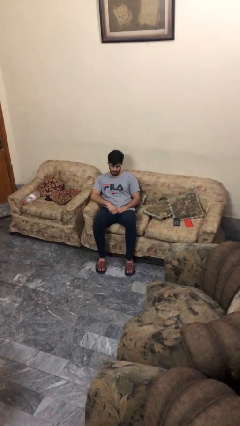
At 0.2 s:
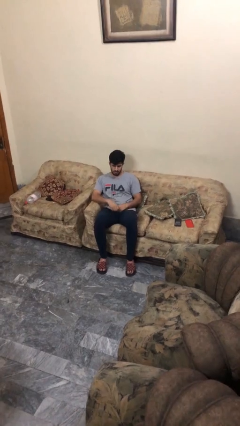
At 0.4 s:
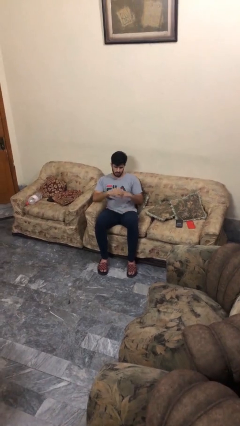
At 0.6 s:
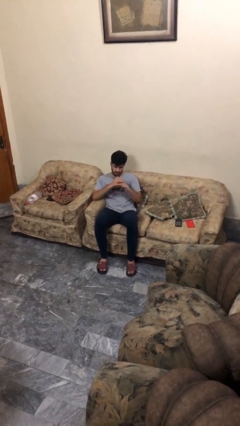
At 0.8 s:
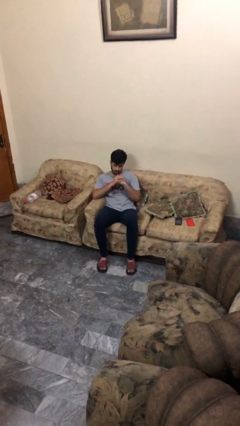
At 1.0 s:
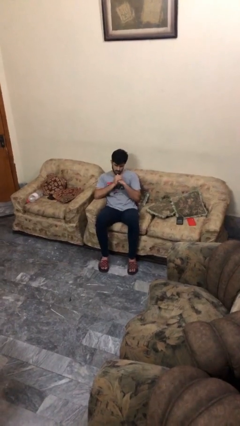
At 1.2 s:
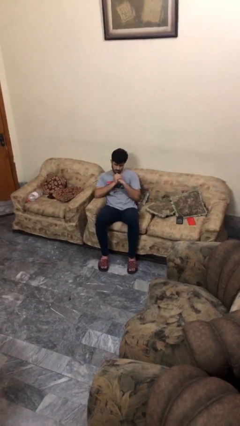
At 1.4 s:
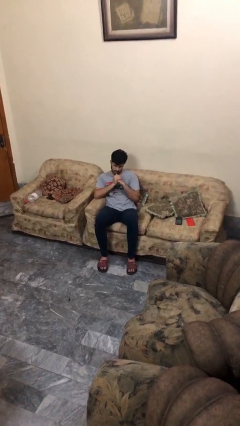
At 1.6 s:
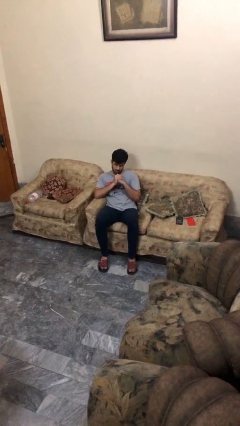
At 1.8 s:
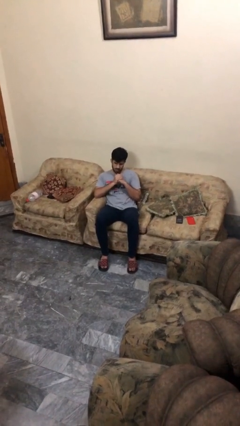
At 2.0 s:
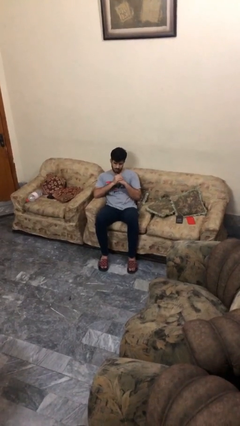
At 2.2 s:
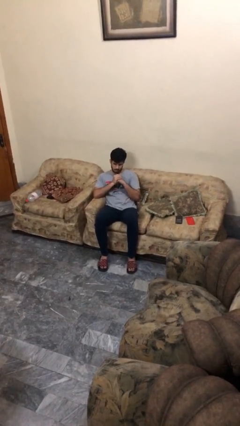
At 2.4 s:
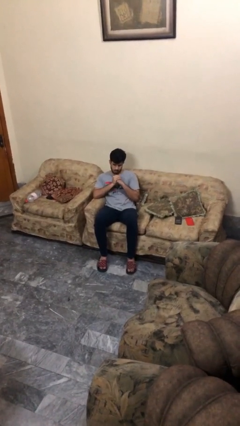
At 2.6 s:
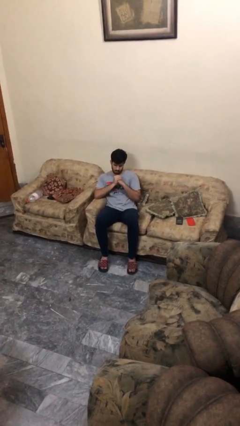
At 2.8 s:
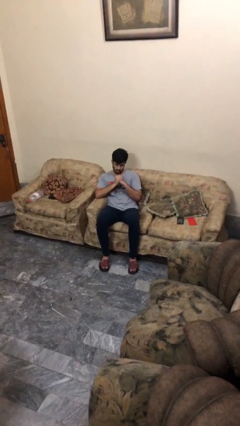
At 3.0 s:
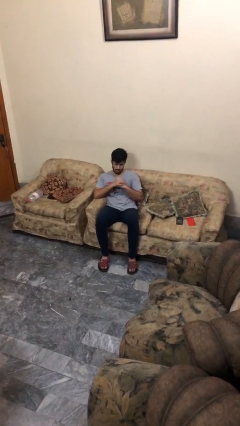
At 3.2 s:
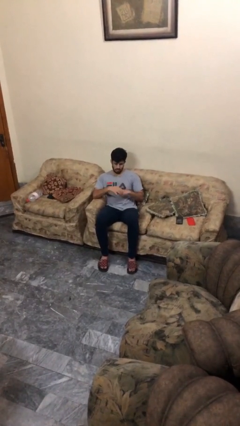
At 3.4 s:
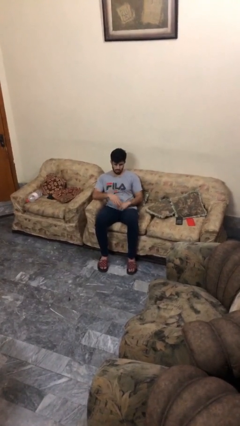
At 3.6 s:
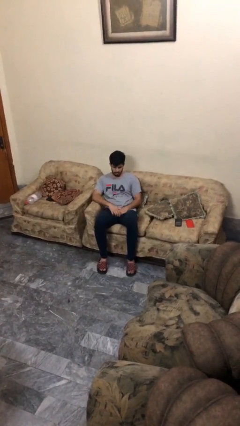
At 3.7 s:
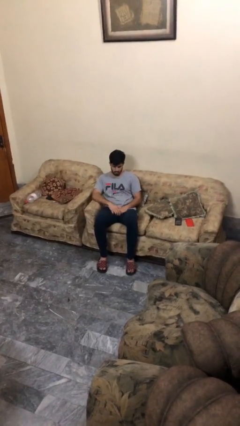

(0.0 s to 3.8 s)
person cracks knuckles

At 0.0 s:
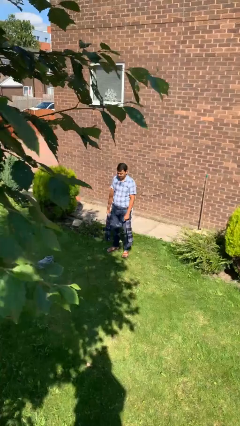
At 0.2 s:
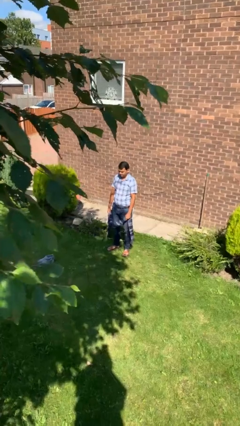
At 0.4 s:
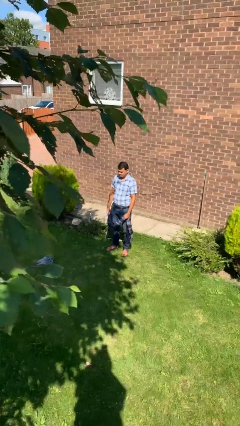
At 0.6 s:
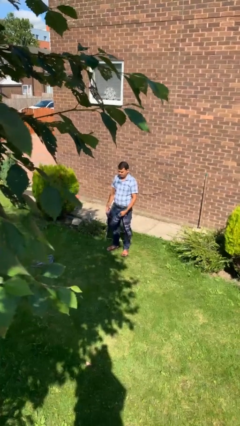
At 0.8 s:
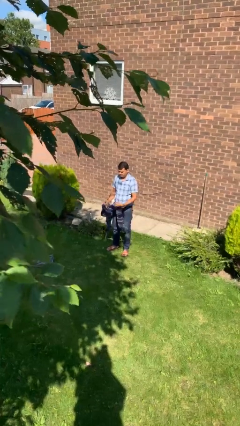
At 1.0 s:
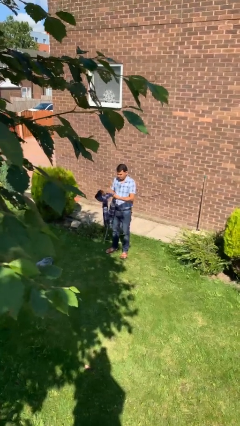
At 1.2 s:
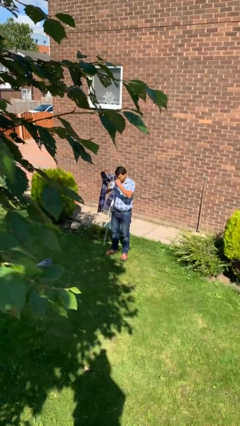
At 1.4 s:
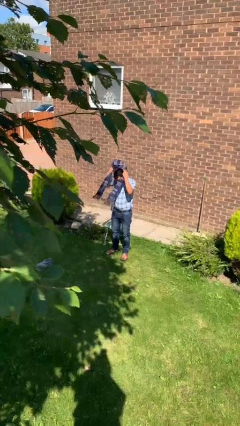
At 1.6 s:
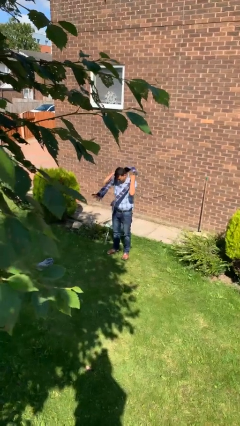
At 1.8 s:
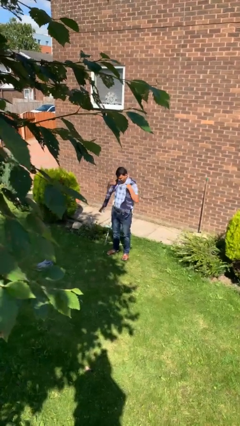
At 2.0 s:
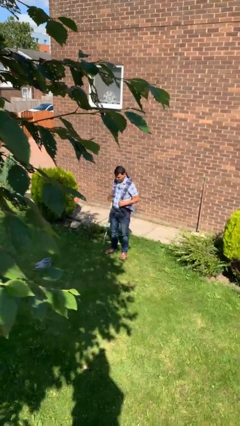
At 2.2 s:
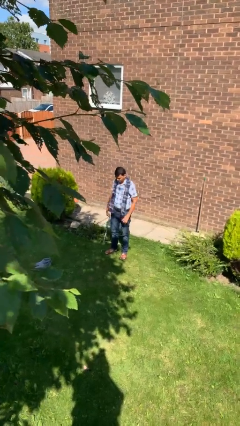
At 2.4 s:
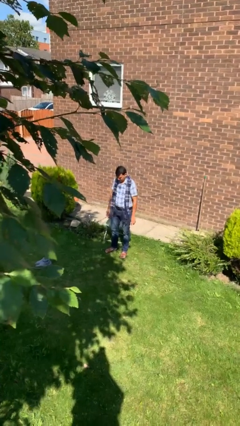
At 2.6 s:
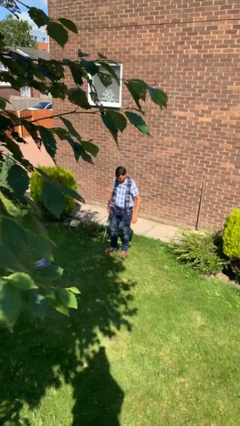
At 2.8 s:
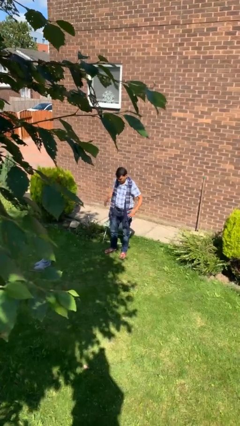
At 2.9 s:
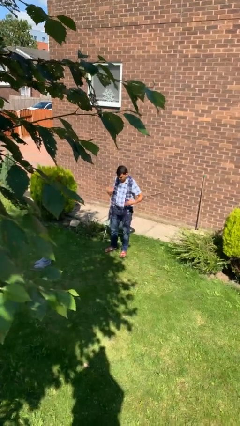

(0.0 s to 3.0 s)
person puts on scarf

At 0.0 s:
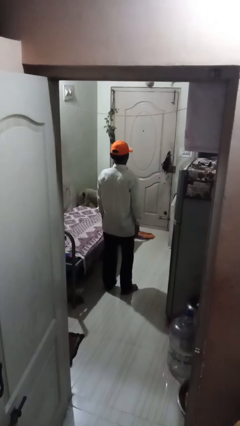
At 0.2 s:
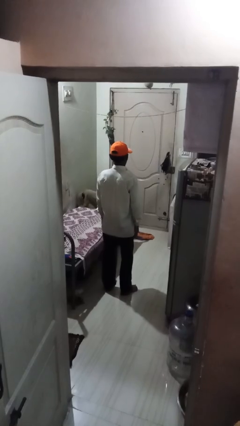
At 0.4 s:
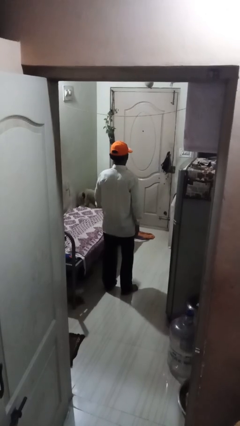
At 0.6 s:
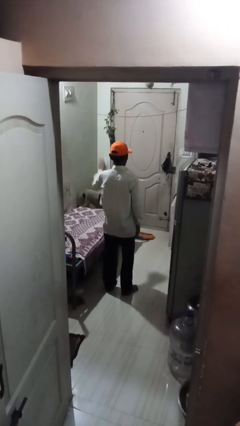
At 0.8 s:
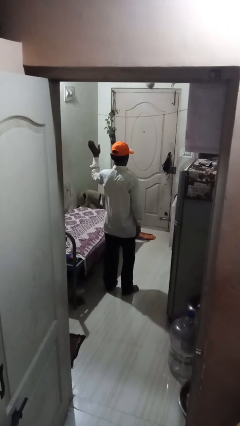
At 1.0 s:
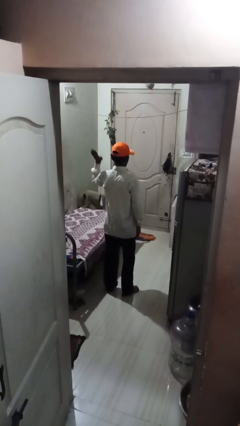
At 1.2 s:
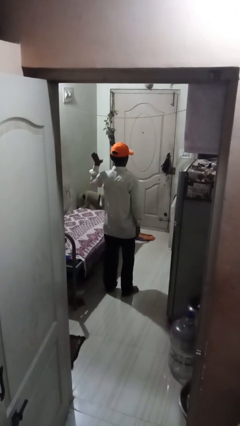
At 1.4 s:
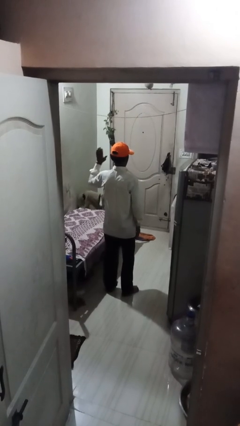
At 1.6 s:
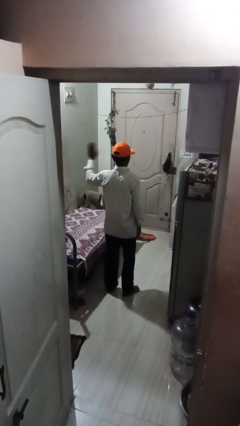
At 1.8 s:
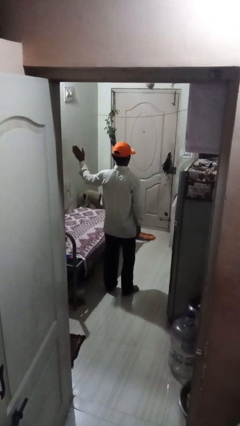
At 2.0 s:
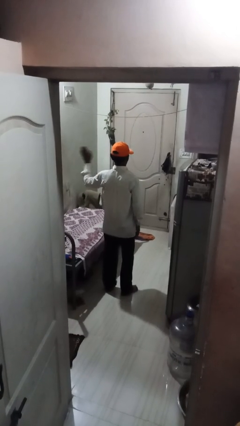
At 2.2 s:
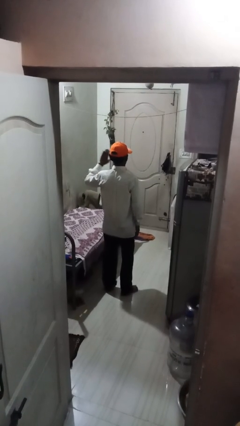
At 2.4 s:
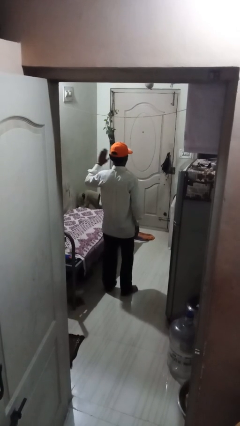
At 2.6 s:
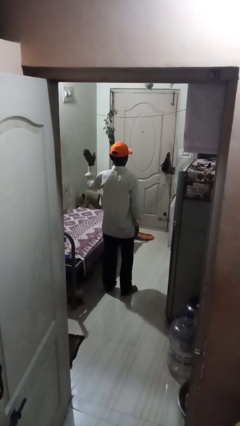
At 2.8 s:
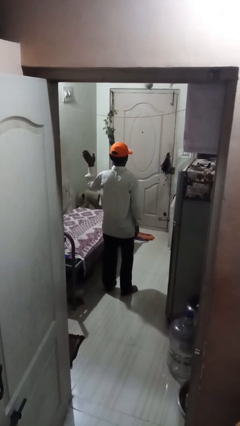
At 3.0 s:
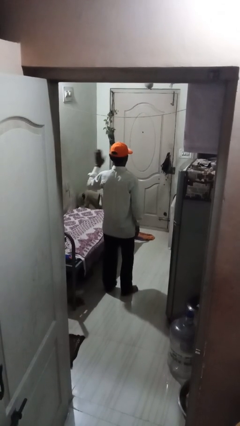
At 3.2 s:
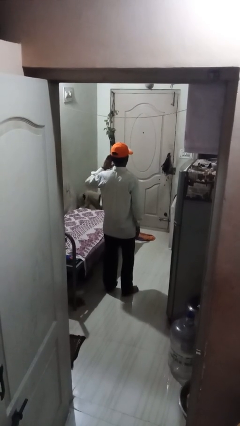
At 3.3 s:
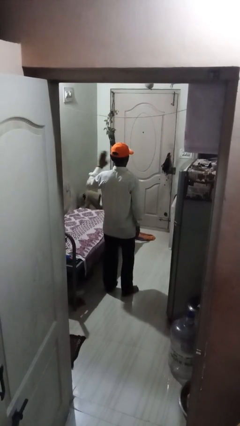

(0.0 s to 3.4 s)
person waves at person

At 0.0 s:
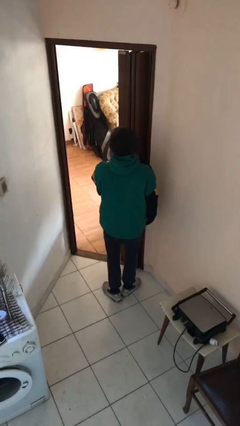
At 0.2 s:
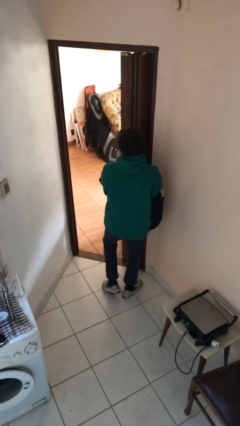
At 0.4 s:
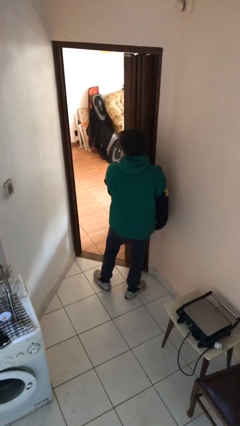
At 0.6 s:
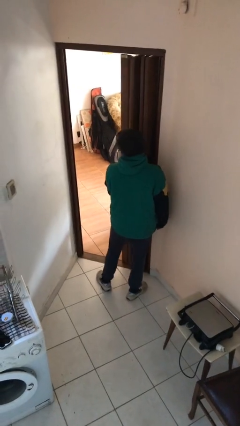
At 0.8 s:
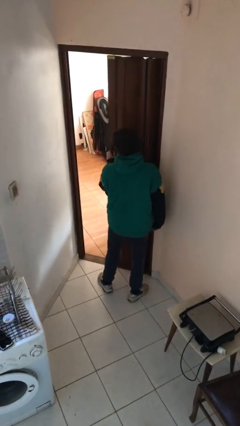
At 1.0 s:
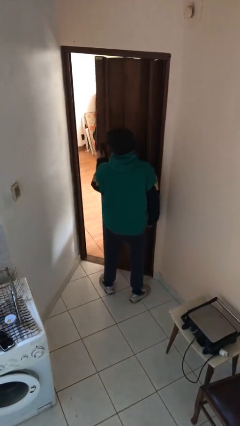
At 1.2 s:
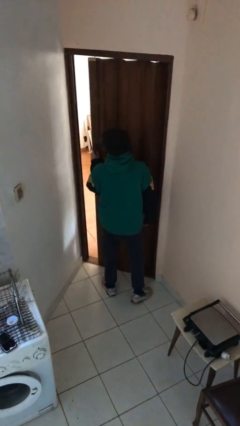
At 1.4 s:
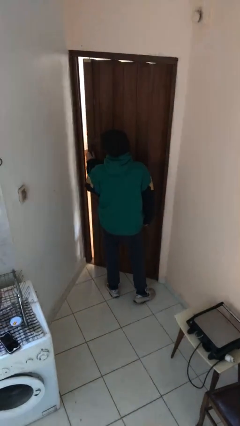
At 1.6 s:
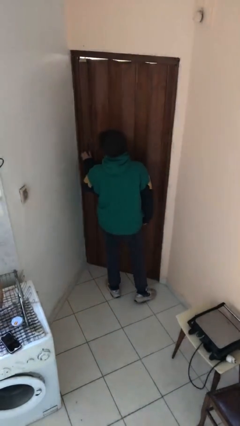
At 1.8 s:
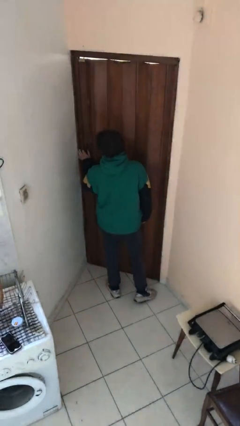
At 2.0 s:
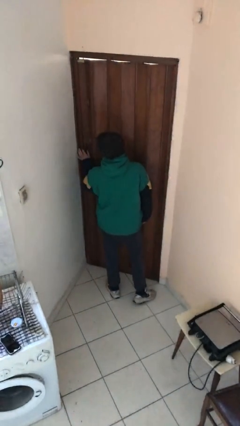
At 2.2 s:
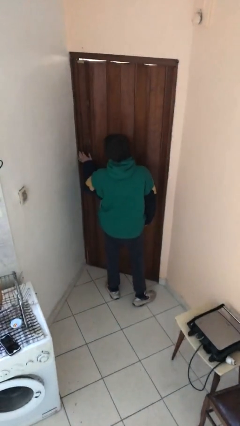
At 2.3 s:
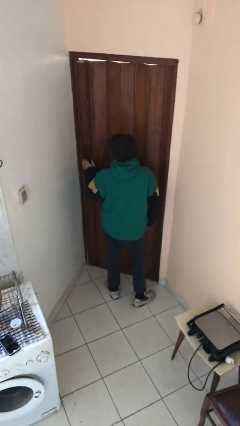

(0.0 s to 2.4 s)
person closes sliding door

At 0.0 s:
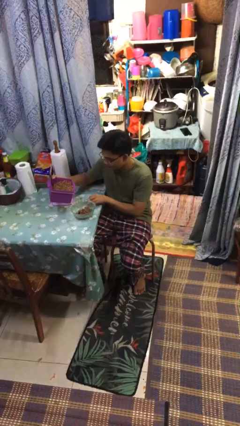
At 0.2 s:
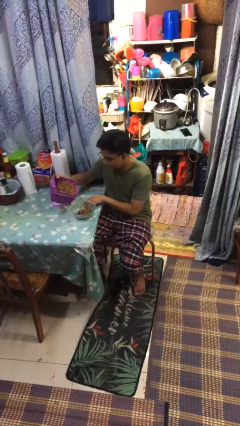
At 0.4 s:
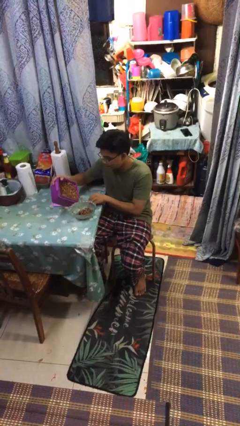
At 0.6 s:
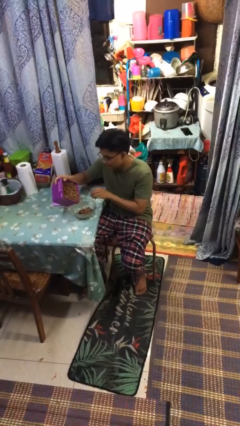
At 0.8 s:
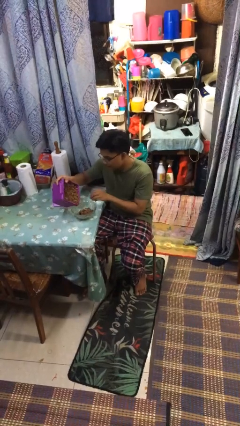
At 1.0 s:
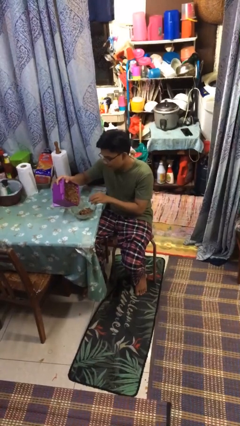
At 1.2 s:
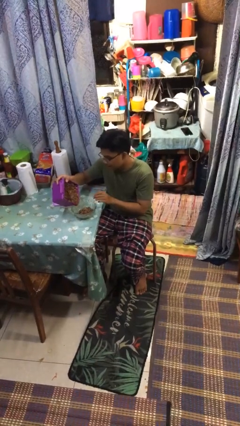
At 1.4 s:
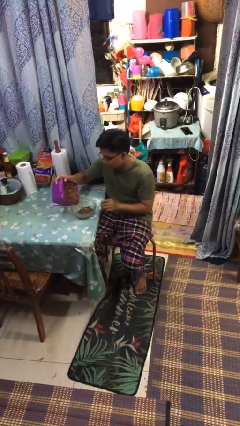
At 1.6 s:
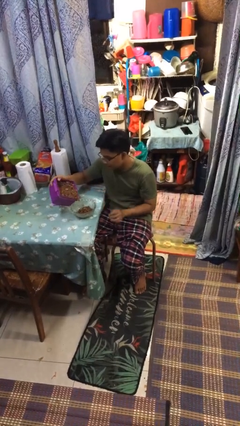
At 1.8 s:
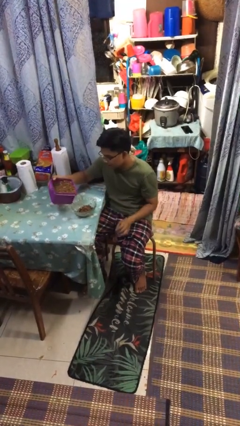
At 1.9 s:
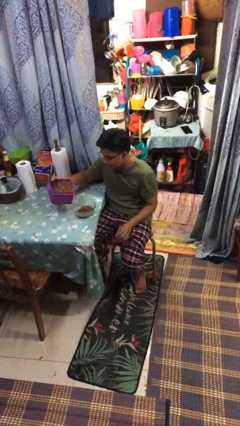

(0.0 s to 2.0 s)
person pours into bowl

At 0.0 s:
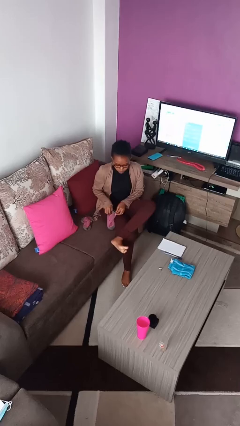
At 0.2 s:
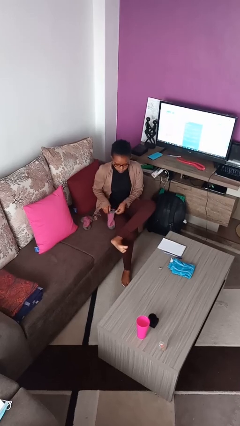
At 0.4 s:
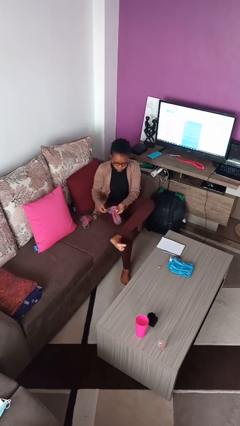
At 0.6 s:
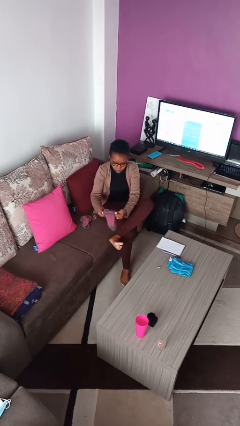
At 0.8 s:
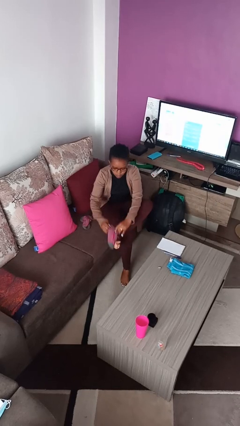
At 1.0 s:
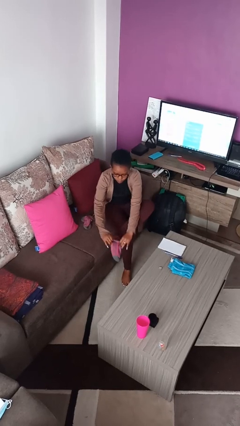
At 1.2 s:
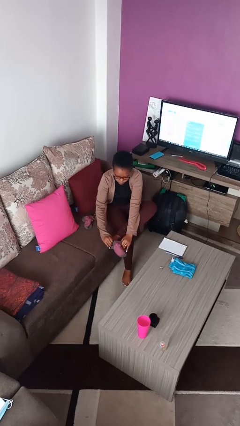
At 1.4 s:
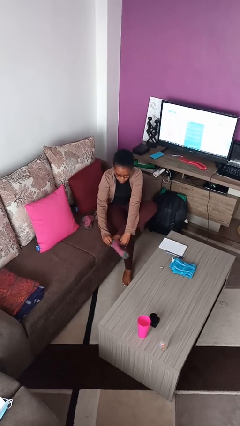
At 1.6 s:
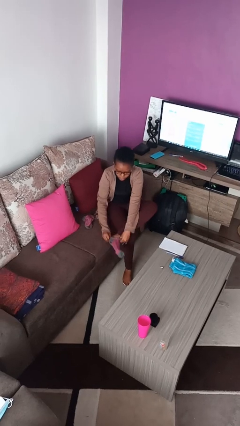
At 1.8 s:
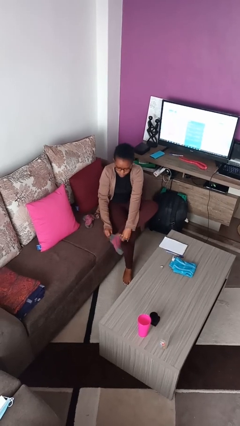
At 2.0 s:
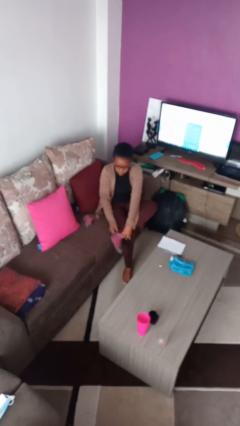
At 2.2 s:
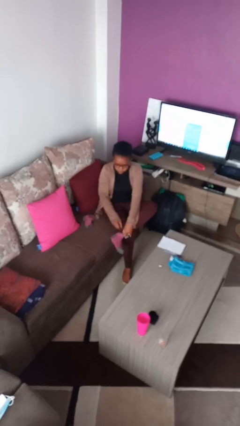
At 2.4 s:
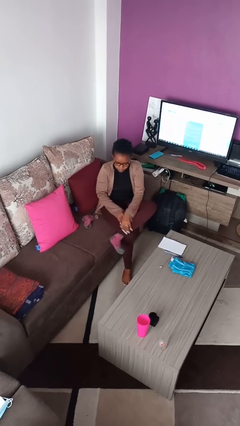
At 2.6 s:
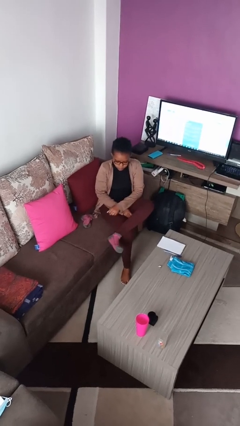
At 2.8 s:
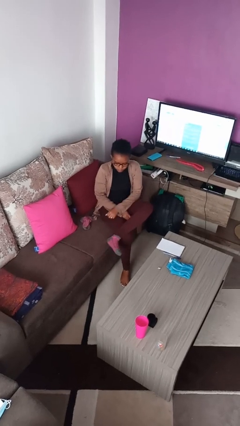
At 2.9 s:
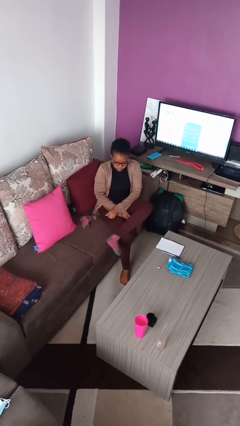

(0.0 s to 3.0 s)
person puts on socks
